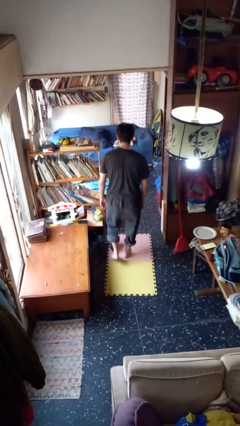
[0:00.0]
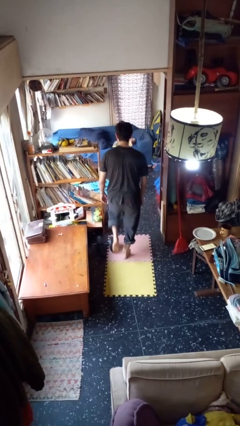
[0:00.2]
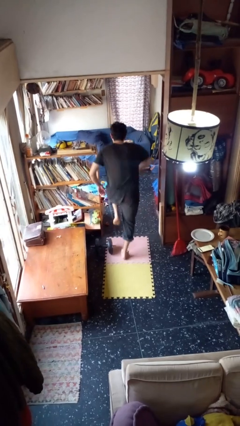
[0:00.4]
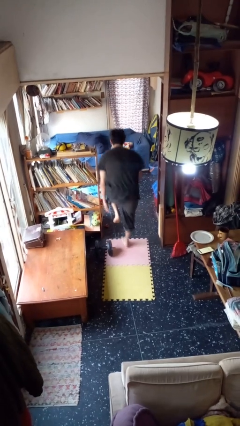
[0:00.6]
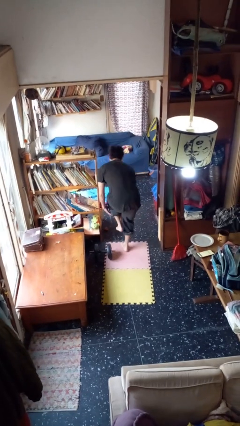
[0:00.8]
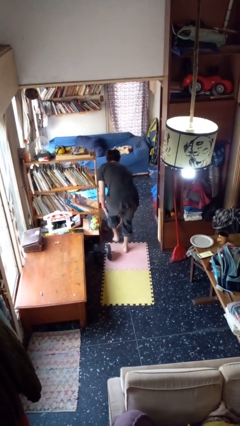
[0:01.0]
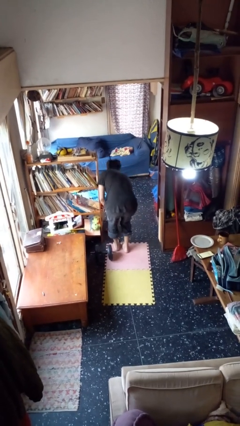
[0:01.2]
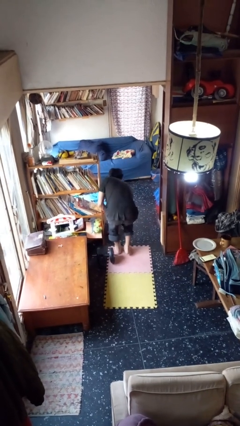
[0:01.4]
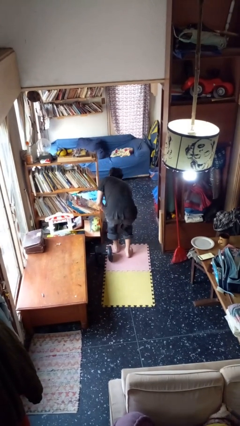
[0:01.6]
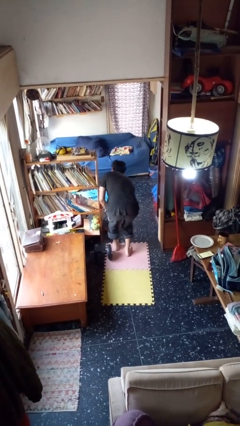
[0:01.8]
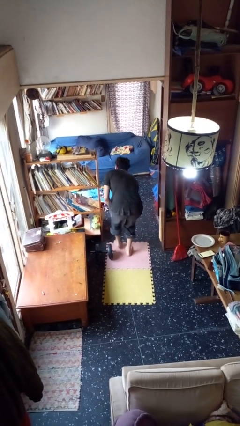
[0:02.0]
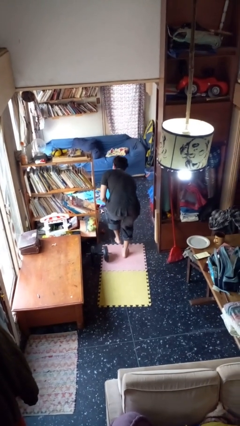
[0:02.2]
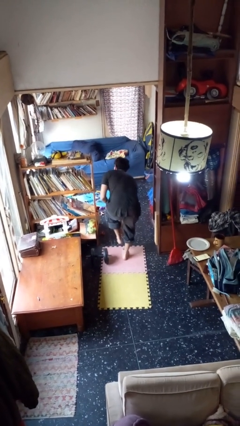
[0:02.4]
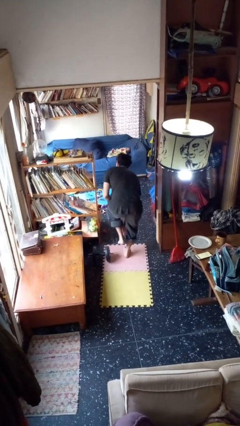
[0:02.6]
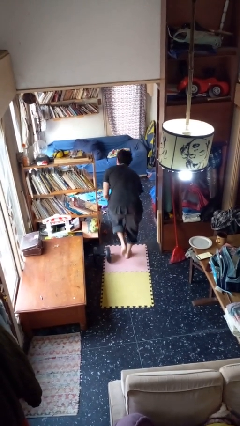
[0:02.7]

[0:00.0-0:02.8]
person stubs toe

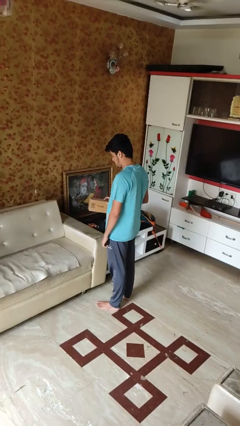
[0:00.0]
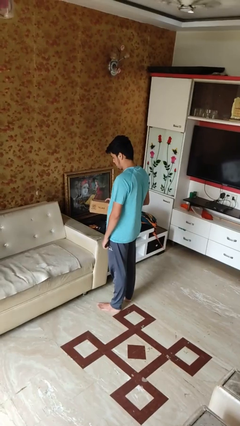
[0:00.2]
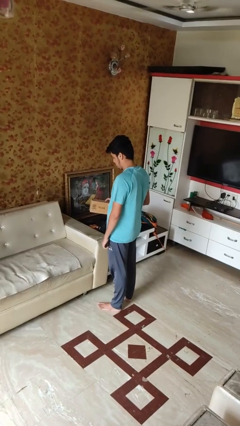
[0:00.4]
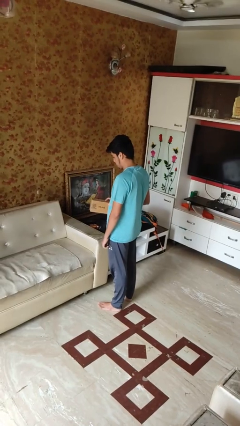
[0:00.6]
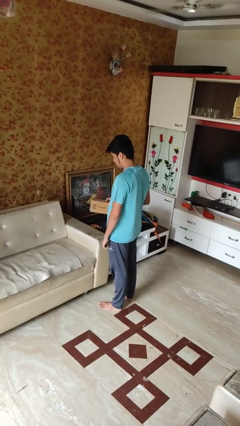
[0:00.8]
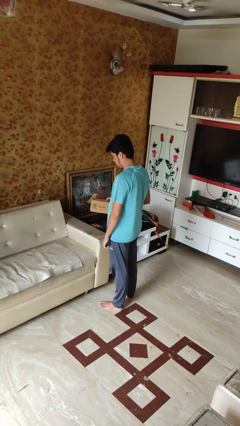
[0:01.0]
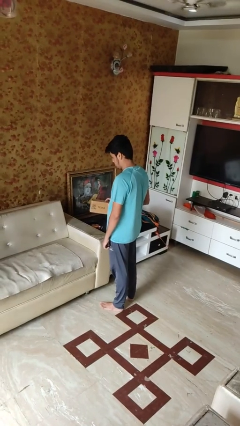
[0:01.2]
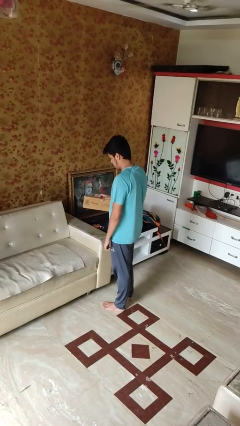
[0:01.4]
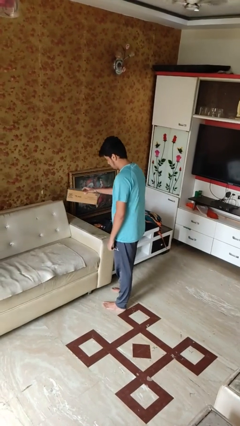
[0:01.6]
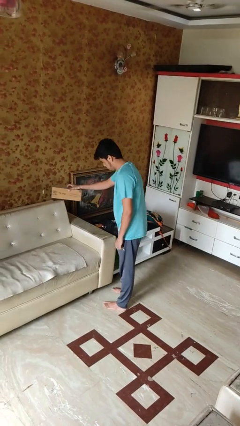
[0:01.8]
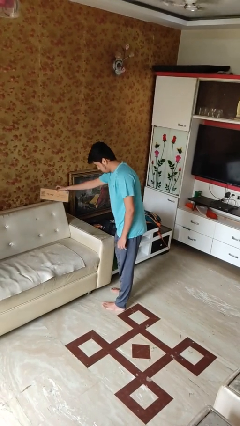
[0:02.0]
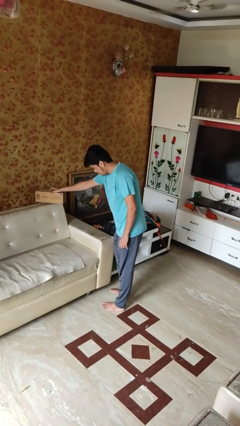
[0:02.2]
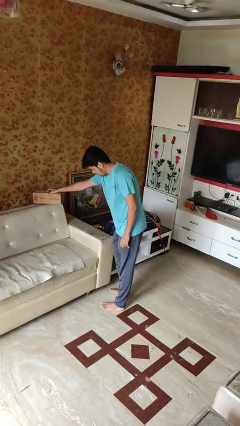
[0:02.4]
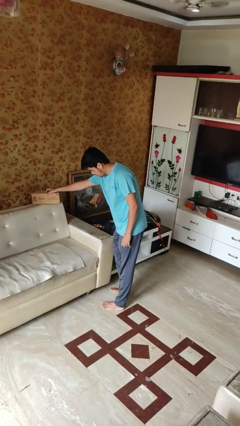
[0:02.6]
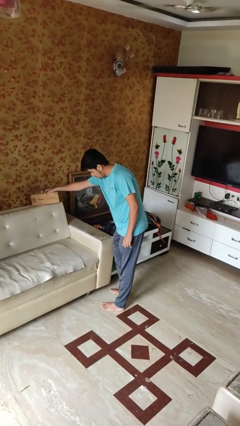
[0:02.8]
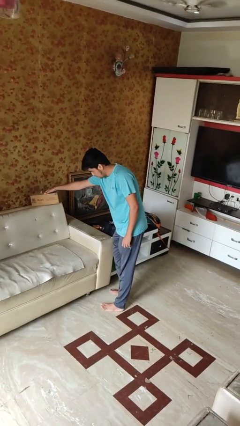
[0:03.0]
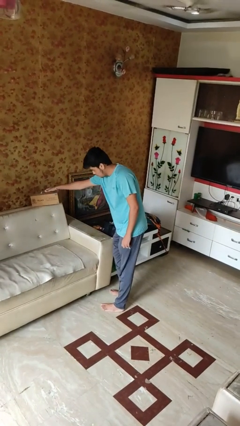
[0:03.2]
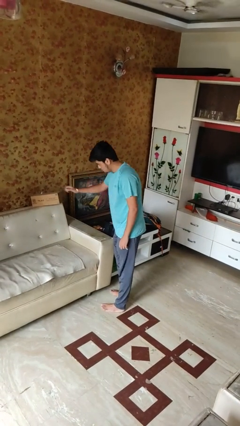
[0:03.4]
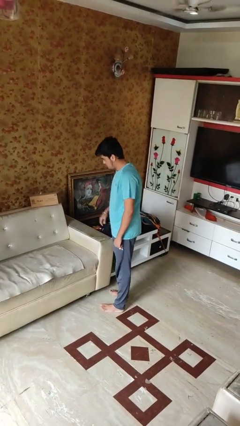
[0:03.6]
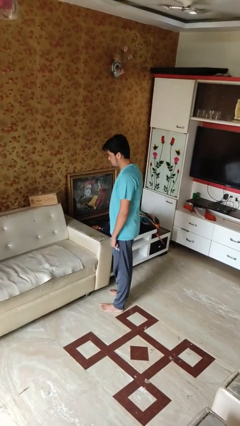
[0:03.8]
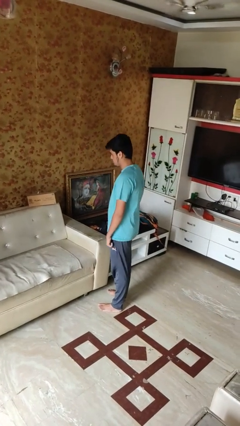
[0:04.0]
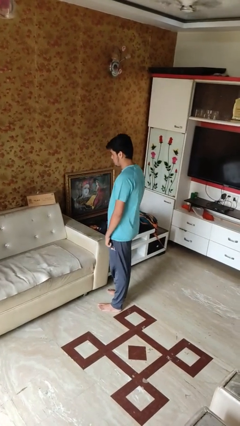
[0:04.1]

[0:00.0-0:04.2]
person puts down object on couch

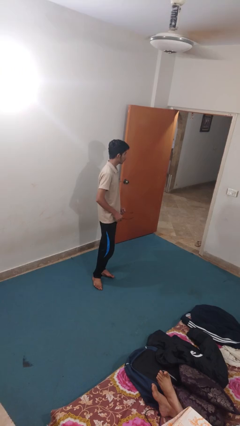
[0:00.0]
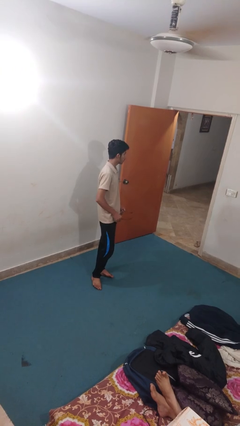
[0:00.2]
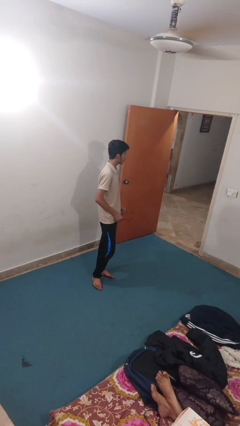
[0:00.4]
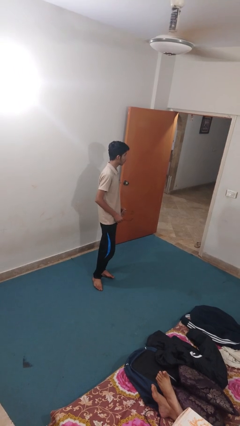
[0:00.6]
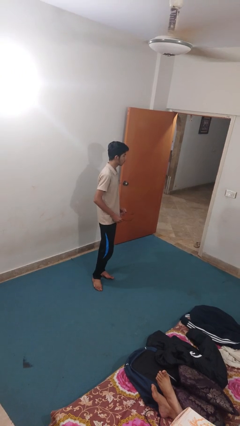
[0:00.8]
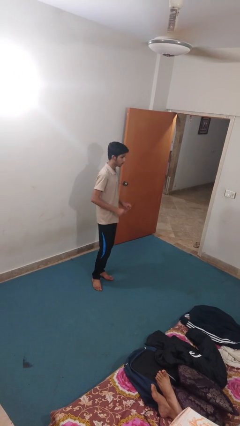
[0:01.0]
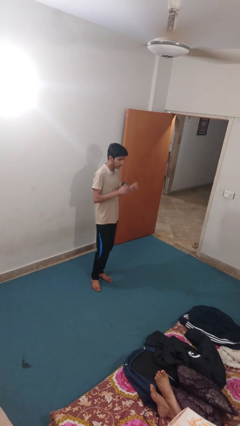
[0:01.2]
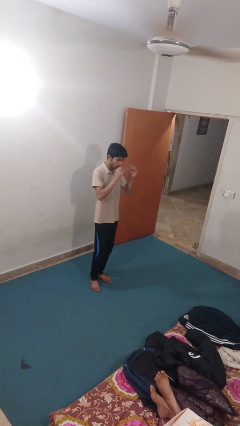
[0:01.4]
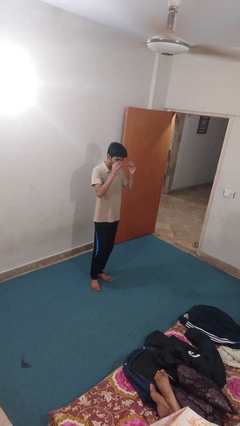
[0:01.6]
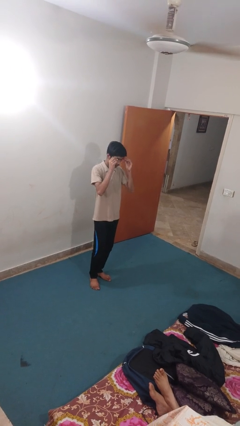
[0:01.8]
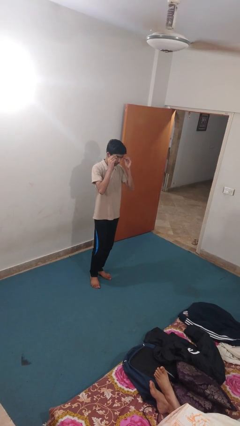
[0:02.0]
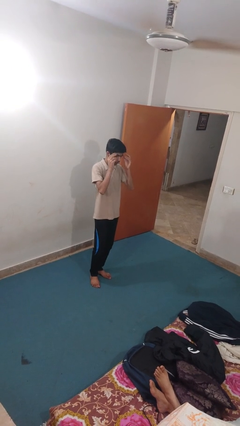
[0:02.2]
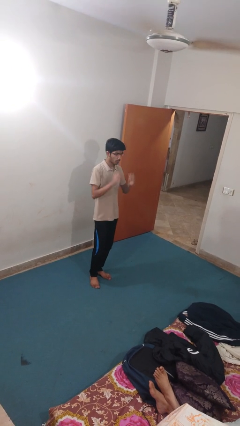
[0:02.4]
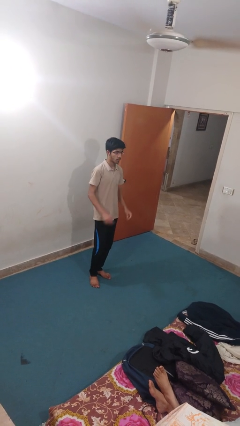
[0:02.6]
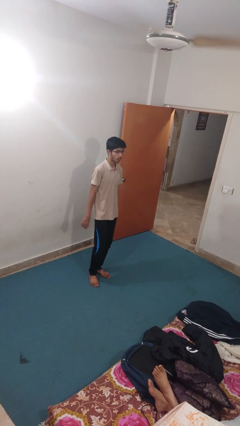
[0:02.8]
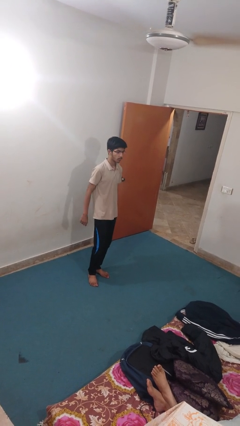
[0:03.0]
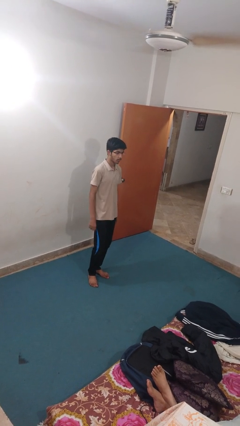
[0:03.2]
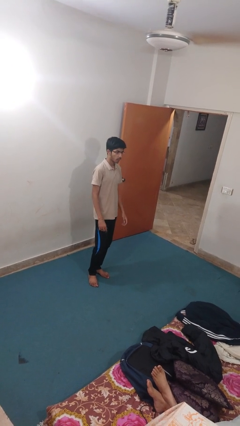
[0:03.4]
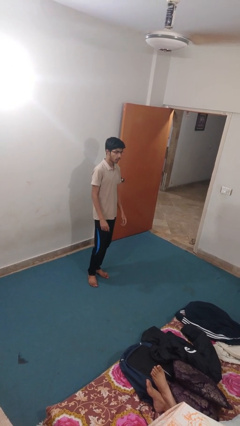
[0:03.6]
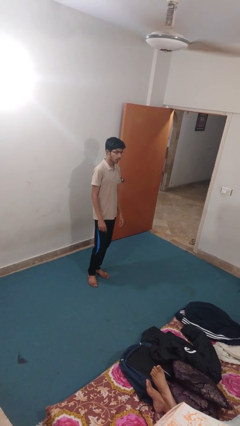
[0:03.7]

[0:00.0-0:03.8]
person puts on glasses

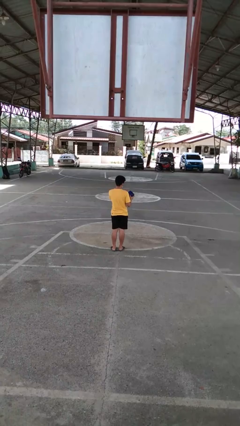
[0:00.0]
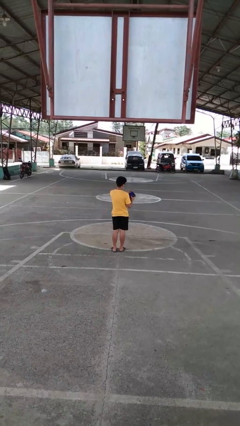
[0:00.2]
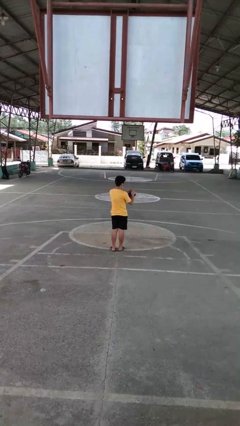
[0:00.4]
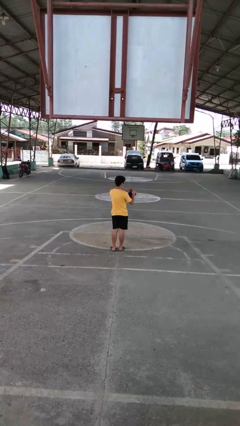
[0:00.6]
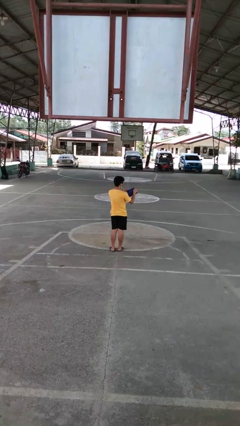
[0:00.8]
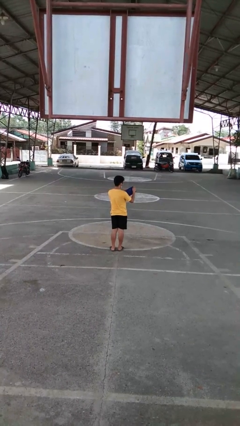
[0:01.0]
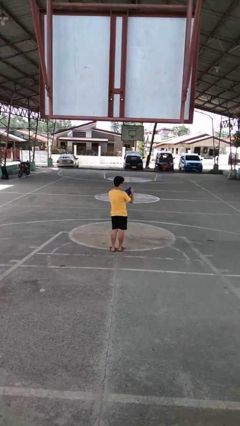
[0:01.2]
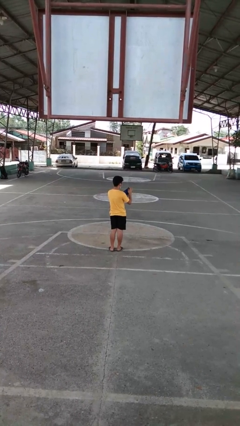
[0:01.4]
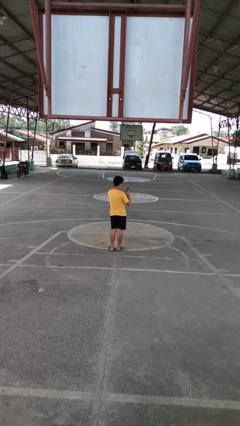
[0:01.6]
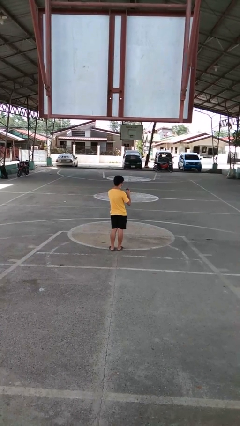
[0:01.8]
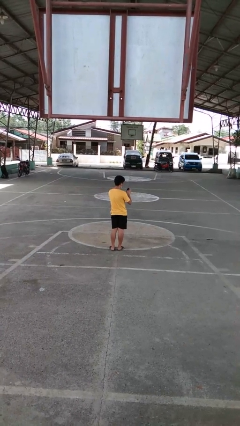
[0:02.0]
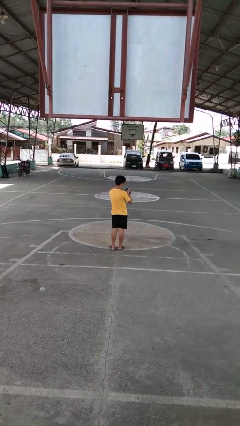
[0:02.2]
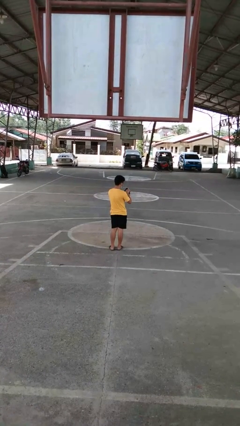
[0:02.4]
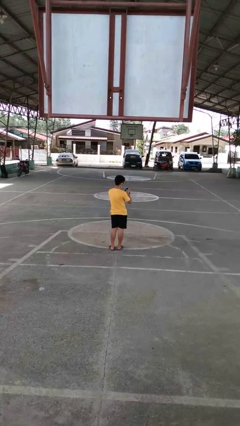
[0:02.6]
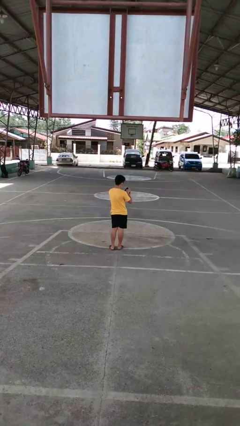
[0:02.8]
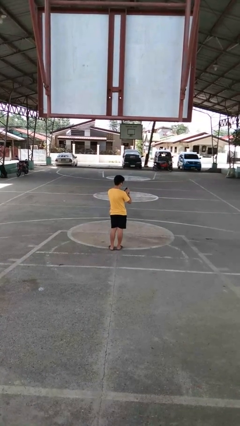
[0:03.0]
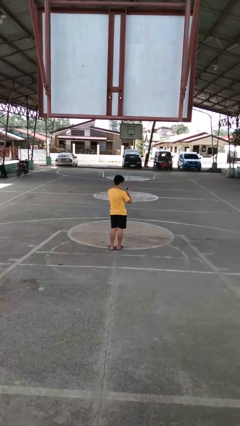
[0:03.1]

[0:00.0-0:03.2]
person searches in purse

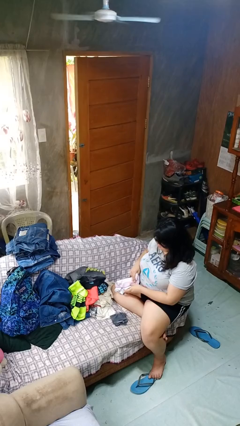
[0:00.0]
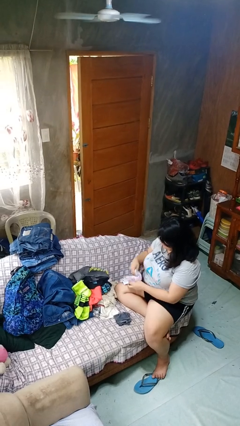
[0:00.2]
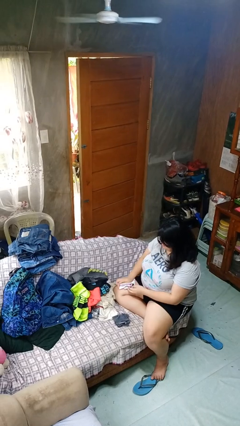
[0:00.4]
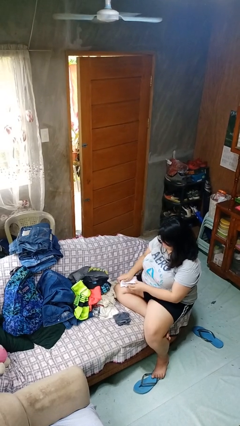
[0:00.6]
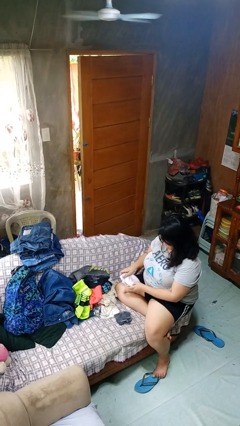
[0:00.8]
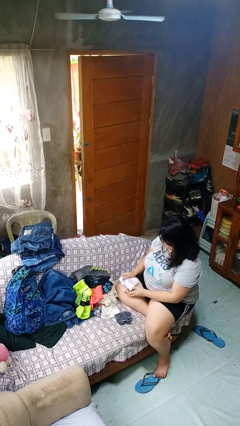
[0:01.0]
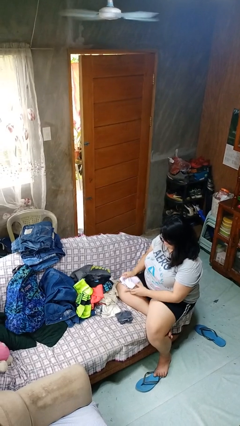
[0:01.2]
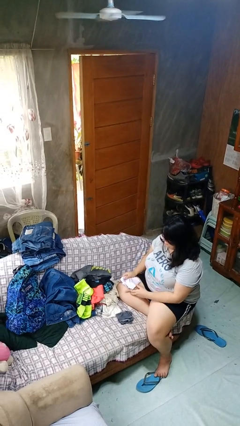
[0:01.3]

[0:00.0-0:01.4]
person folds socks

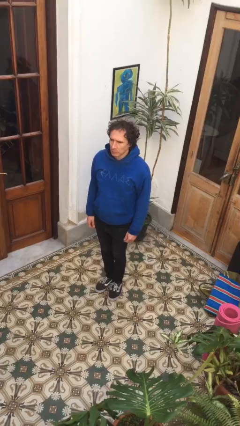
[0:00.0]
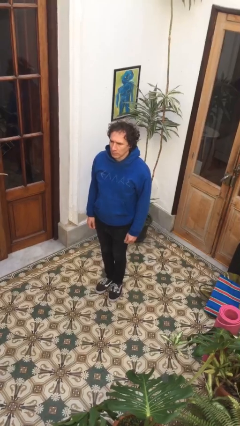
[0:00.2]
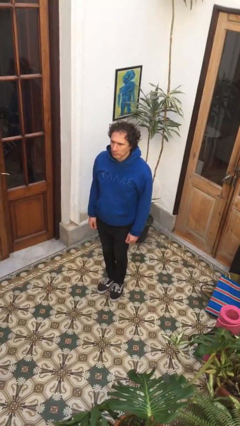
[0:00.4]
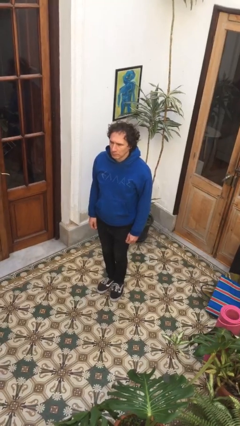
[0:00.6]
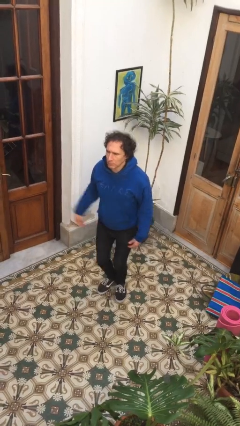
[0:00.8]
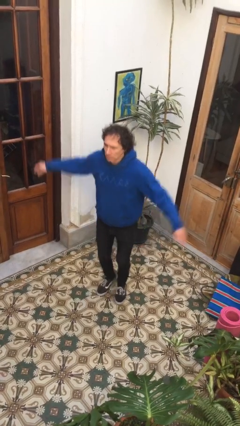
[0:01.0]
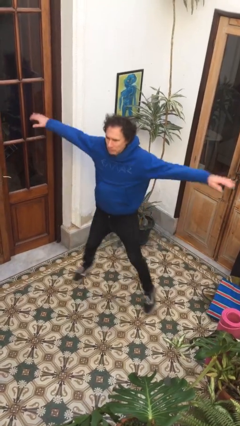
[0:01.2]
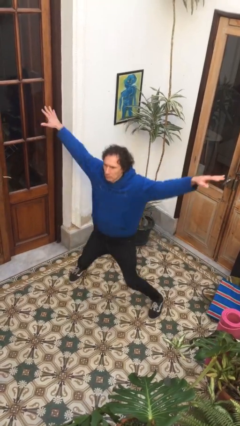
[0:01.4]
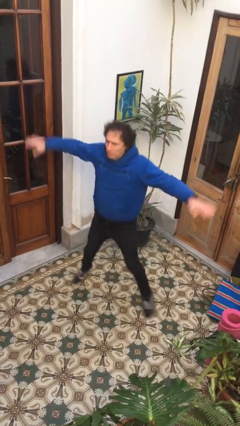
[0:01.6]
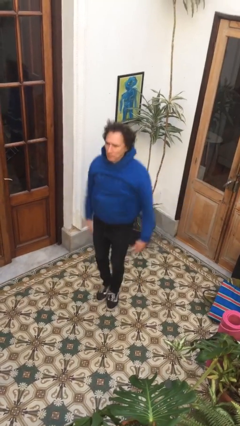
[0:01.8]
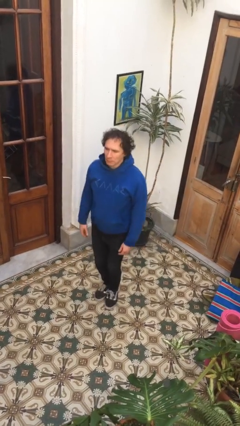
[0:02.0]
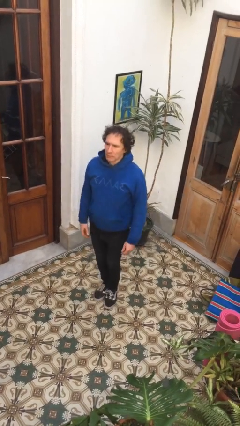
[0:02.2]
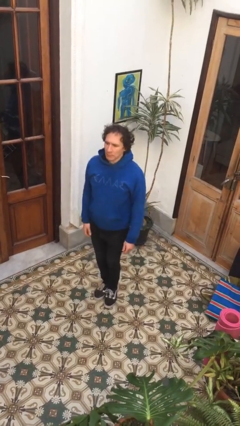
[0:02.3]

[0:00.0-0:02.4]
person exercises with jumping jacks
